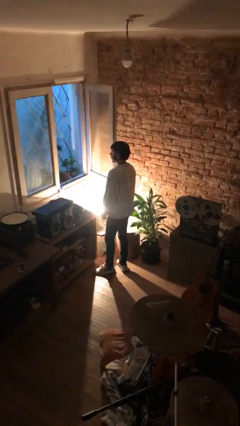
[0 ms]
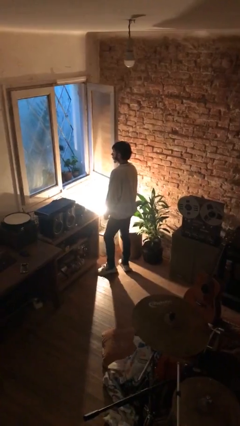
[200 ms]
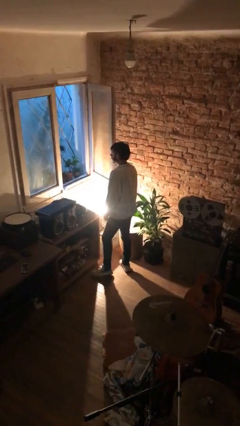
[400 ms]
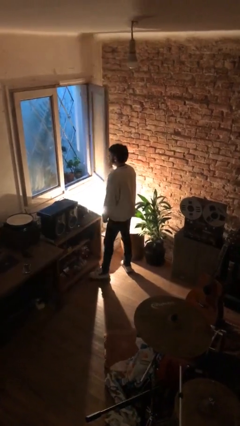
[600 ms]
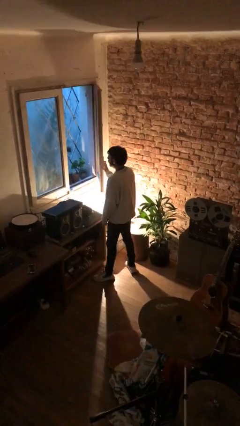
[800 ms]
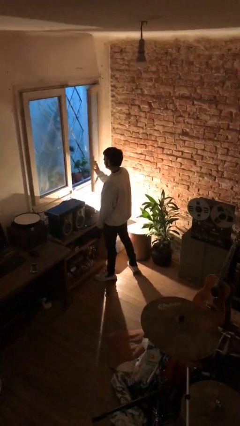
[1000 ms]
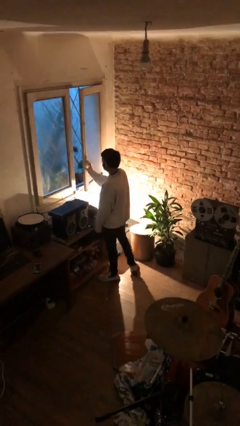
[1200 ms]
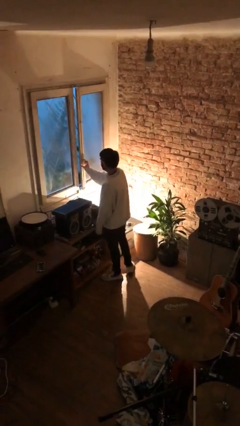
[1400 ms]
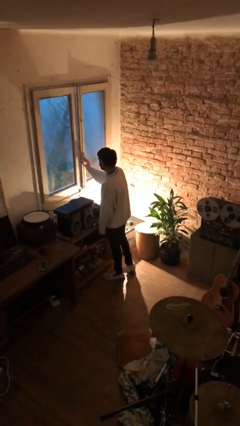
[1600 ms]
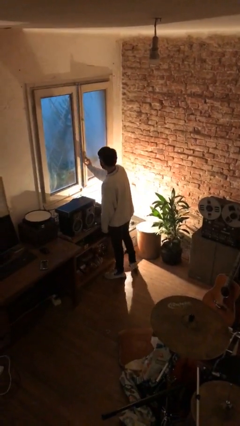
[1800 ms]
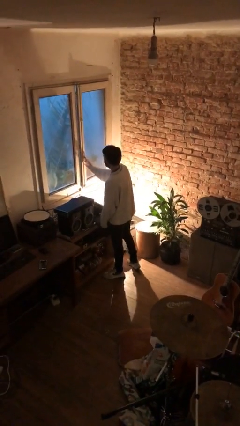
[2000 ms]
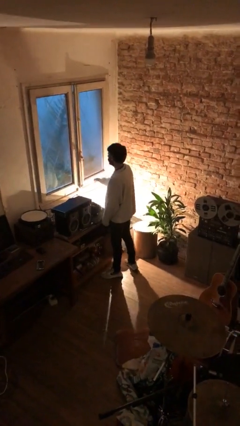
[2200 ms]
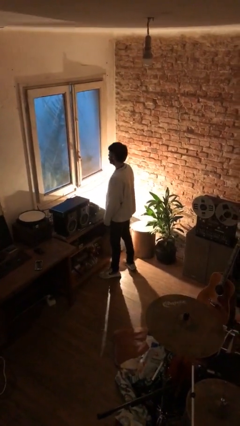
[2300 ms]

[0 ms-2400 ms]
person closes home window

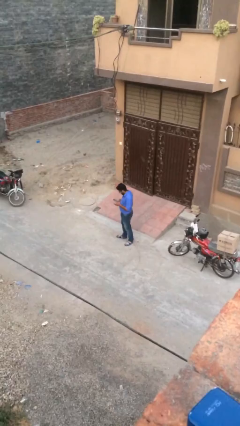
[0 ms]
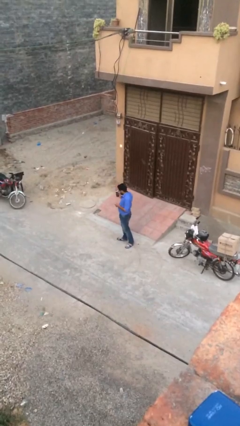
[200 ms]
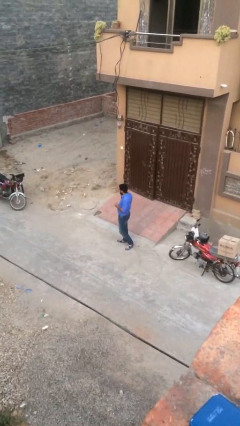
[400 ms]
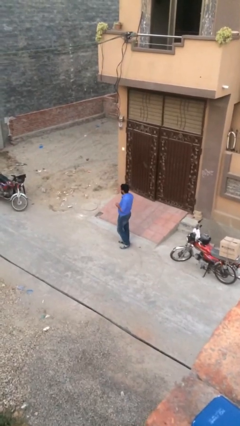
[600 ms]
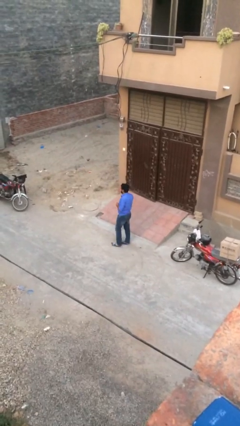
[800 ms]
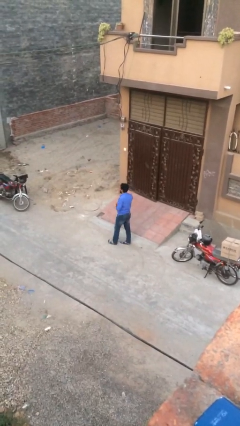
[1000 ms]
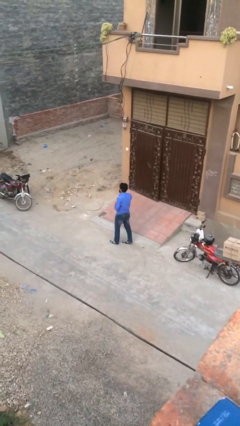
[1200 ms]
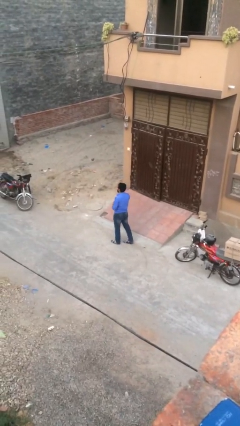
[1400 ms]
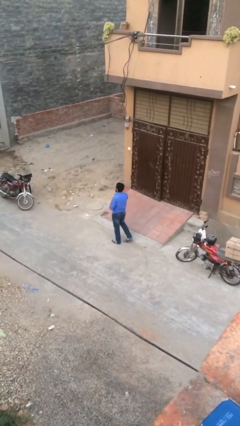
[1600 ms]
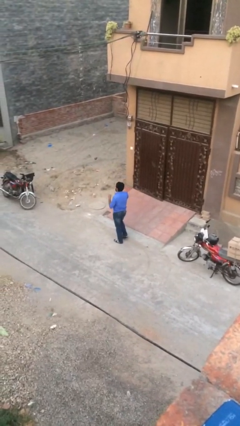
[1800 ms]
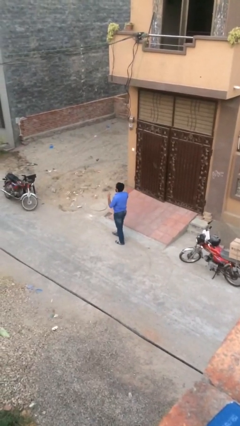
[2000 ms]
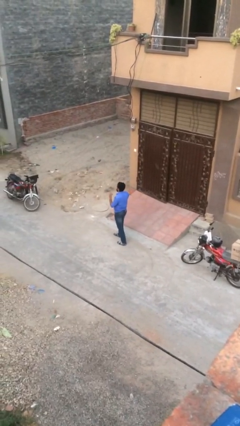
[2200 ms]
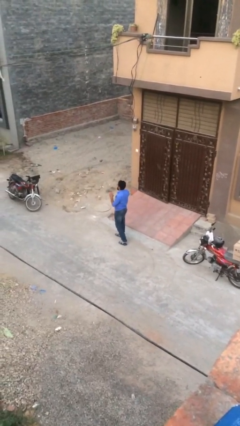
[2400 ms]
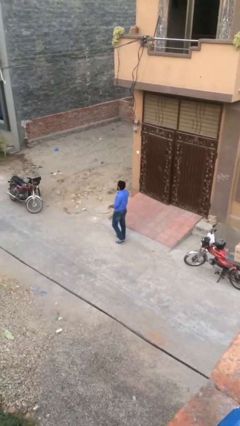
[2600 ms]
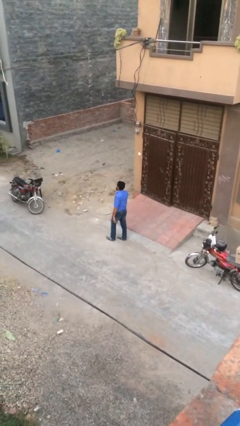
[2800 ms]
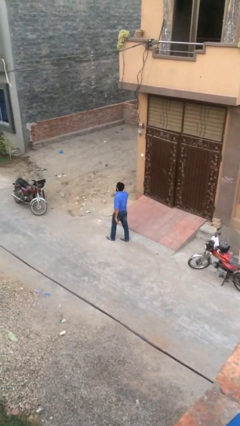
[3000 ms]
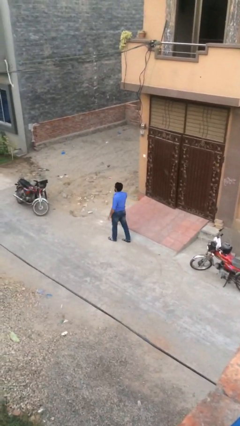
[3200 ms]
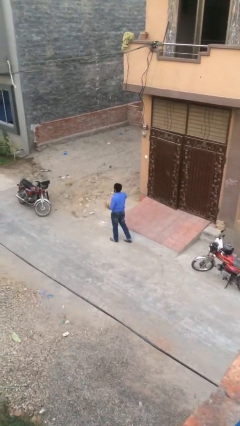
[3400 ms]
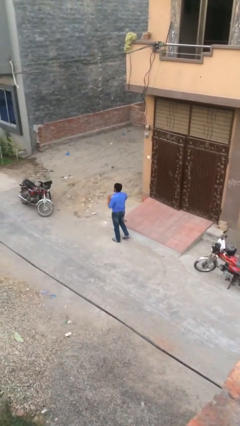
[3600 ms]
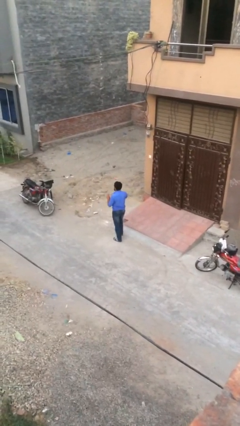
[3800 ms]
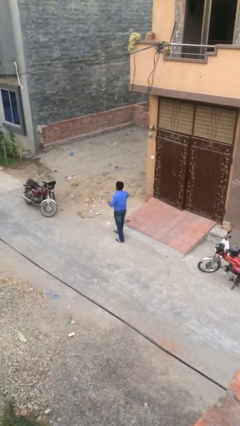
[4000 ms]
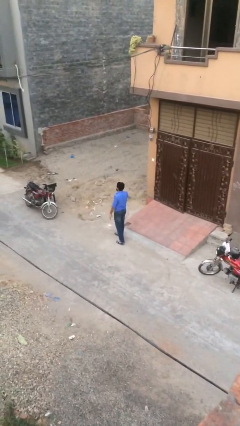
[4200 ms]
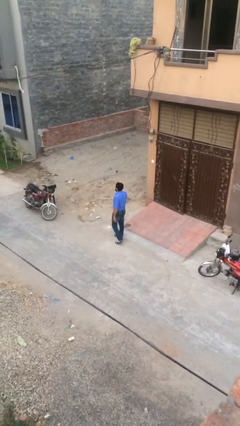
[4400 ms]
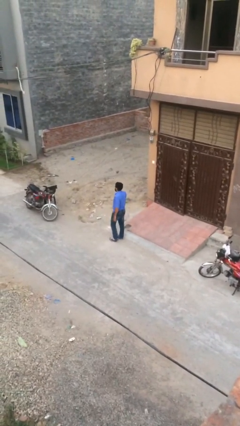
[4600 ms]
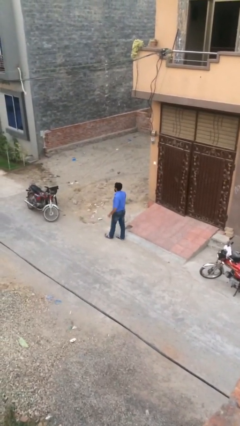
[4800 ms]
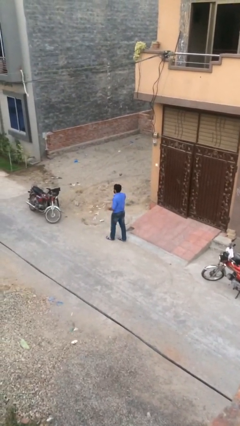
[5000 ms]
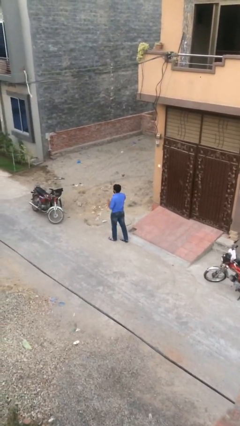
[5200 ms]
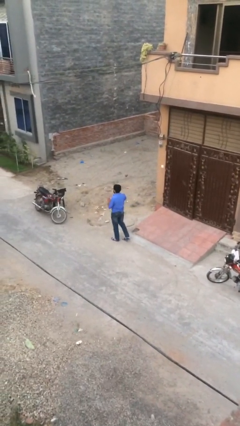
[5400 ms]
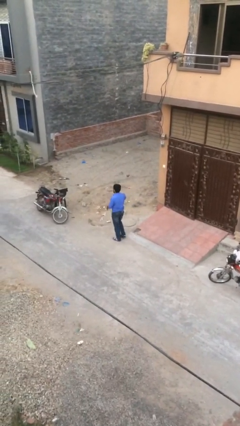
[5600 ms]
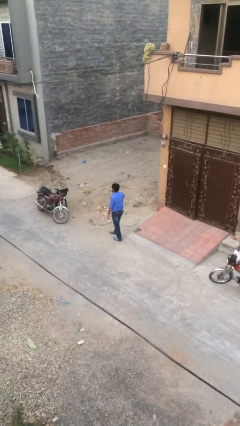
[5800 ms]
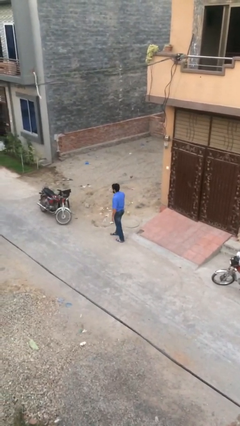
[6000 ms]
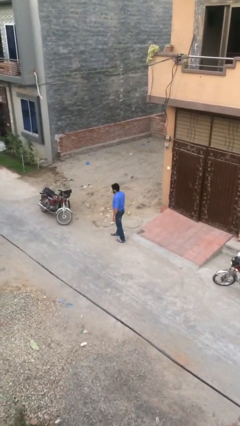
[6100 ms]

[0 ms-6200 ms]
person talks on phone

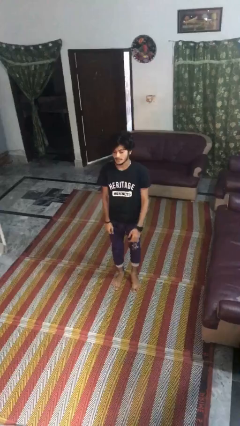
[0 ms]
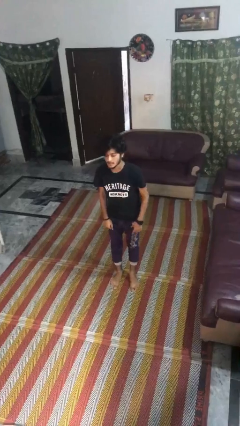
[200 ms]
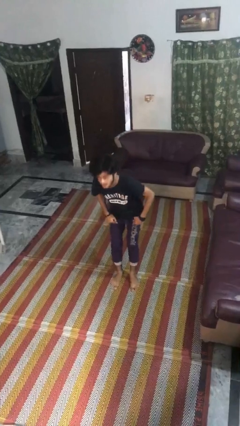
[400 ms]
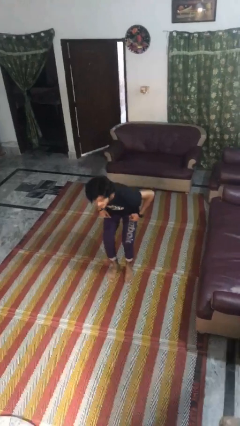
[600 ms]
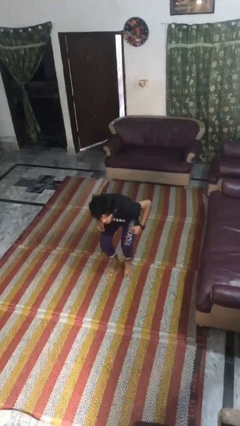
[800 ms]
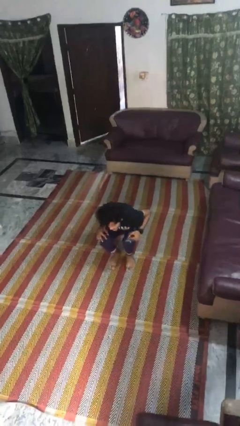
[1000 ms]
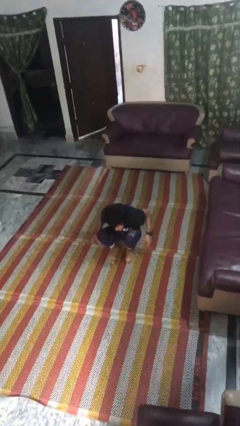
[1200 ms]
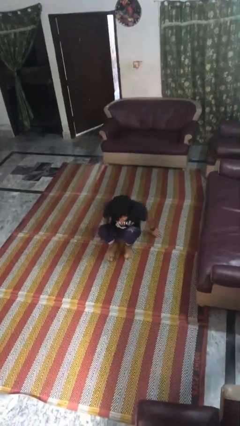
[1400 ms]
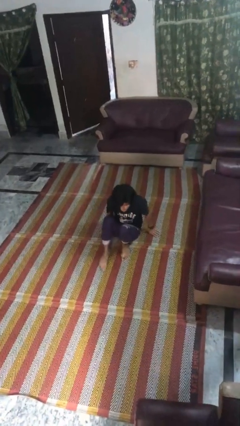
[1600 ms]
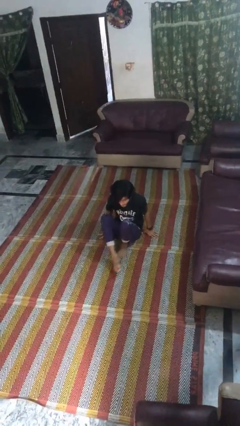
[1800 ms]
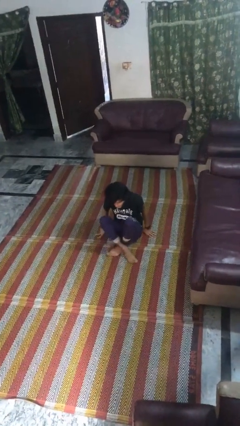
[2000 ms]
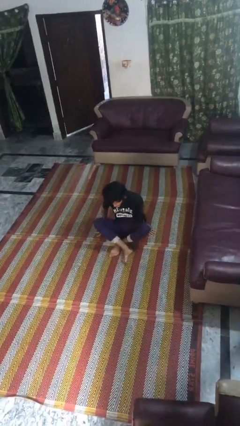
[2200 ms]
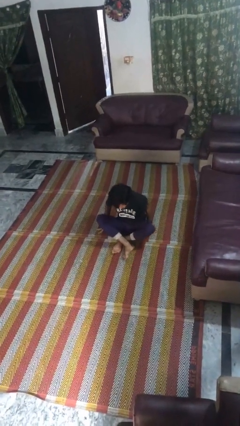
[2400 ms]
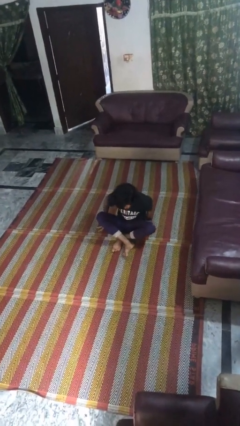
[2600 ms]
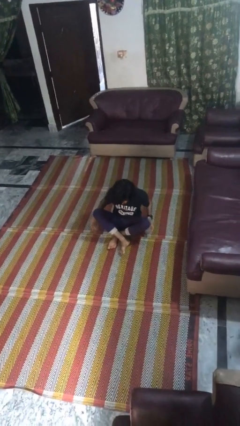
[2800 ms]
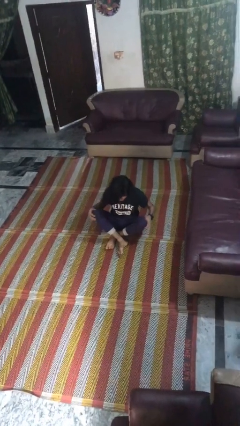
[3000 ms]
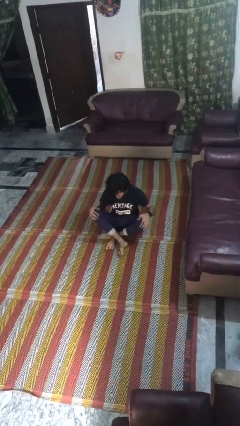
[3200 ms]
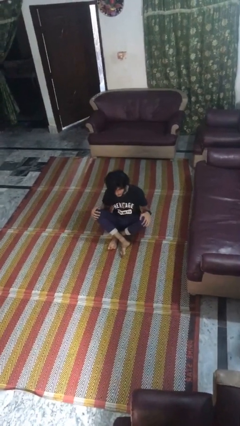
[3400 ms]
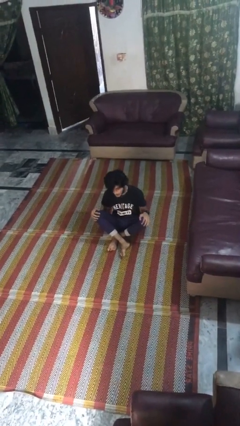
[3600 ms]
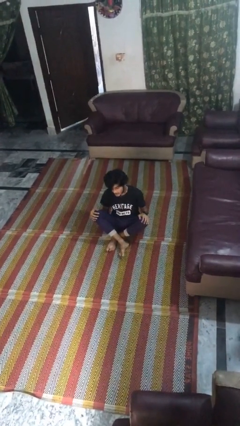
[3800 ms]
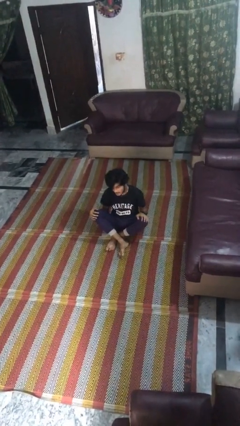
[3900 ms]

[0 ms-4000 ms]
person sits crisscross

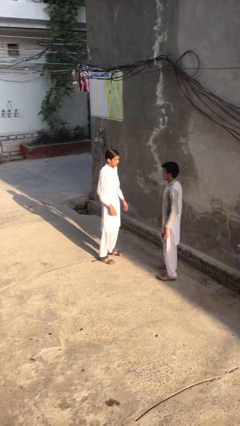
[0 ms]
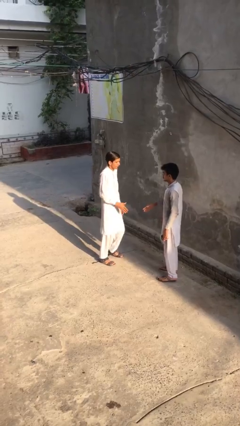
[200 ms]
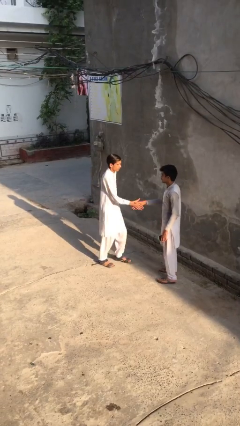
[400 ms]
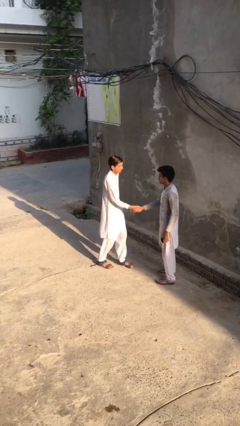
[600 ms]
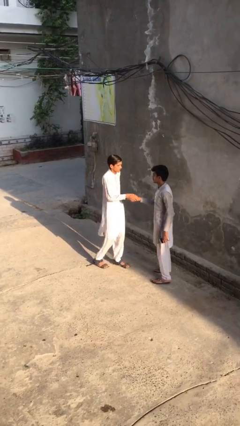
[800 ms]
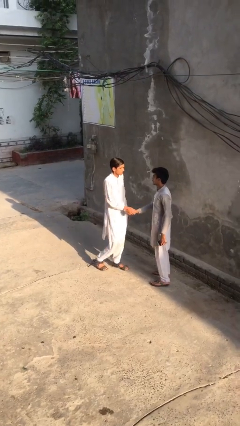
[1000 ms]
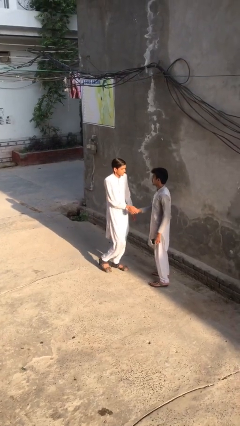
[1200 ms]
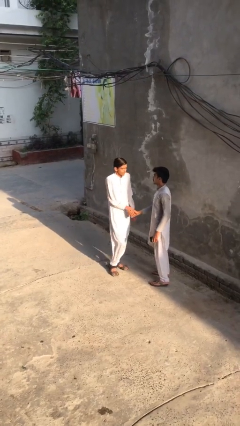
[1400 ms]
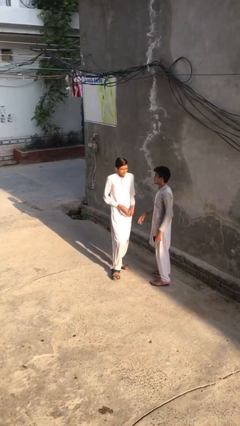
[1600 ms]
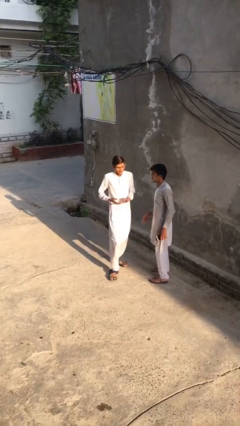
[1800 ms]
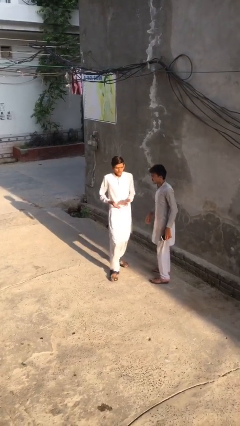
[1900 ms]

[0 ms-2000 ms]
person shakes hand

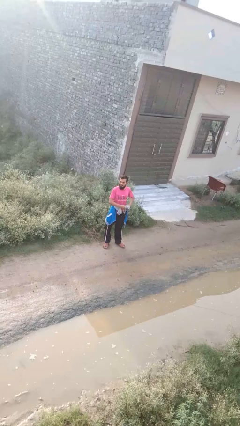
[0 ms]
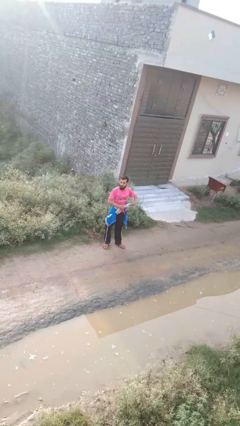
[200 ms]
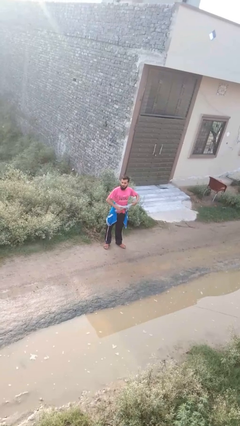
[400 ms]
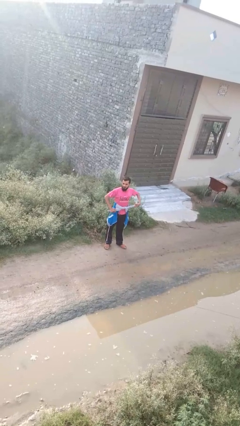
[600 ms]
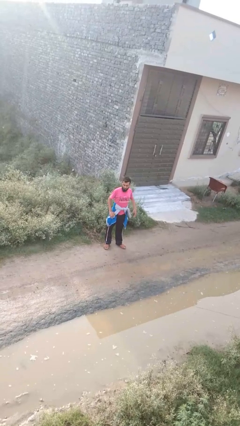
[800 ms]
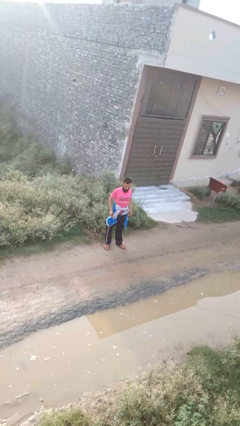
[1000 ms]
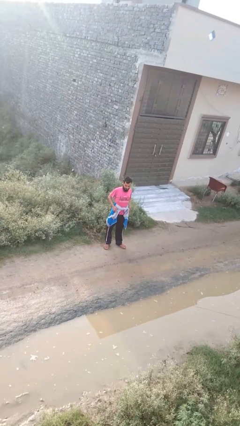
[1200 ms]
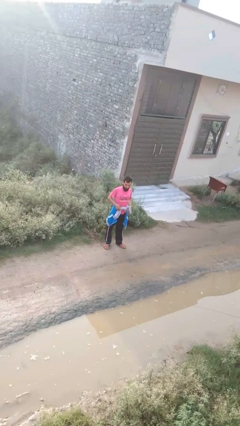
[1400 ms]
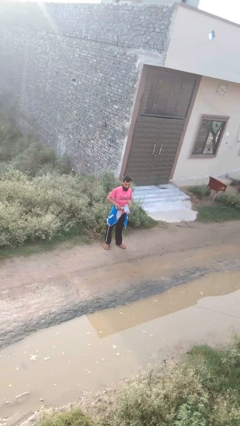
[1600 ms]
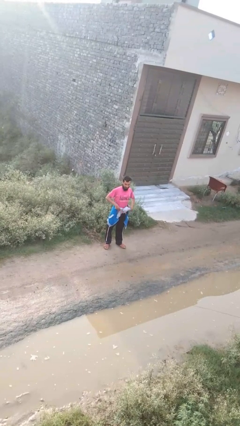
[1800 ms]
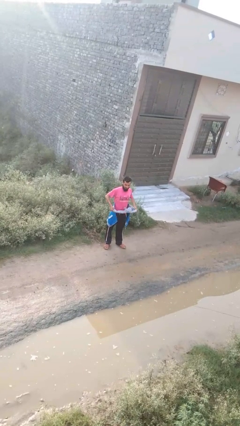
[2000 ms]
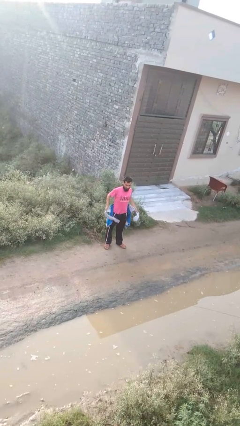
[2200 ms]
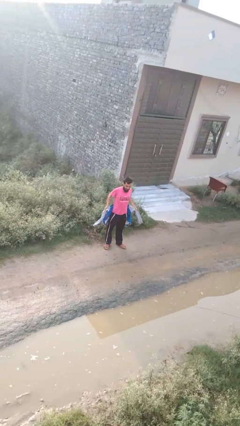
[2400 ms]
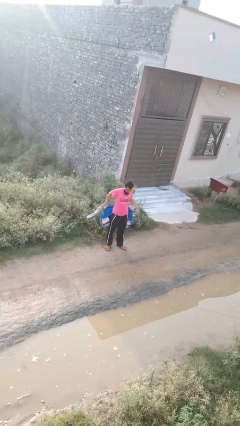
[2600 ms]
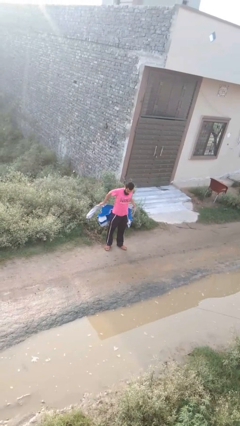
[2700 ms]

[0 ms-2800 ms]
person unties jacket around waist
